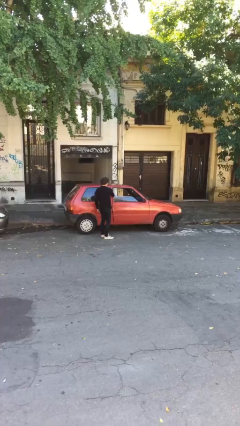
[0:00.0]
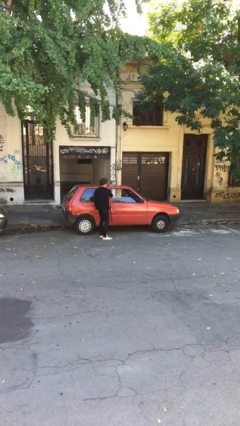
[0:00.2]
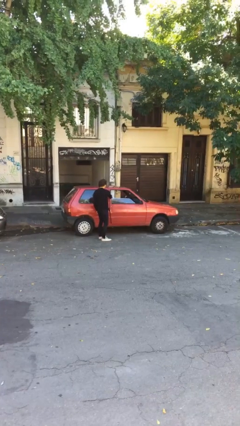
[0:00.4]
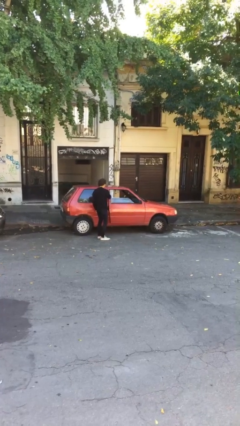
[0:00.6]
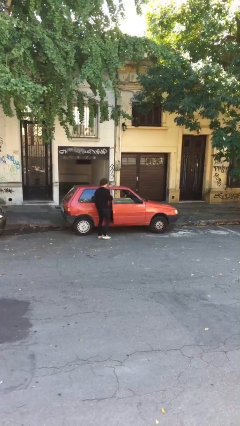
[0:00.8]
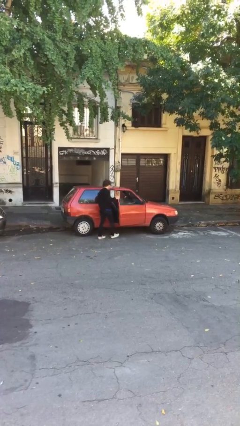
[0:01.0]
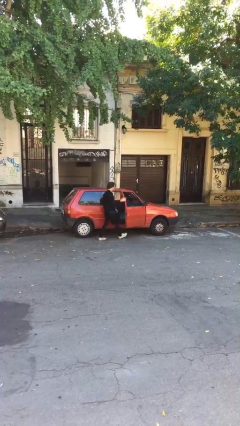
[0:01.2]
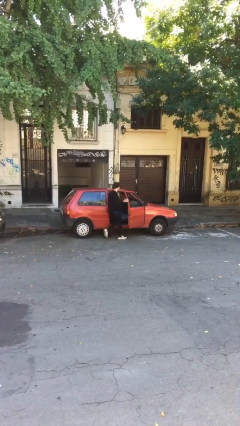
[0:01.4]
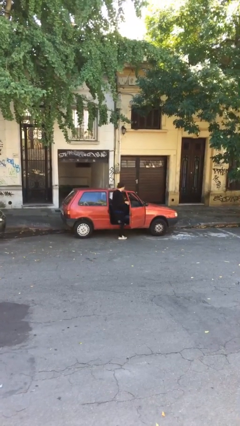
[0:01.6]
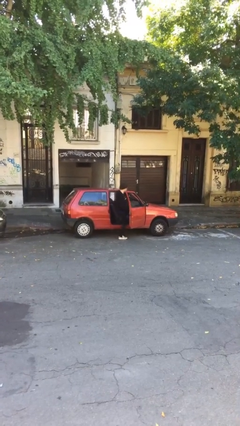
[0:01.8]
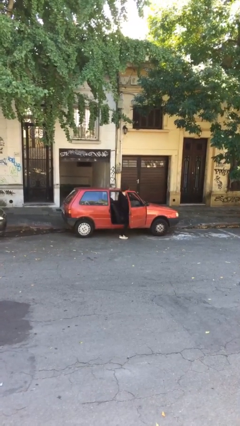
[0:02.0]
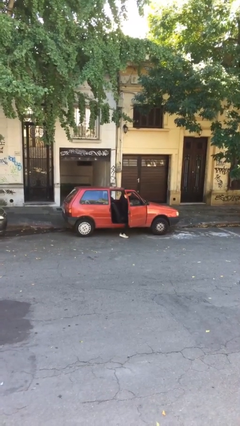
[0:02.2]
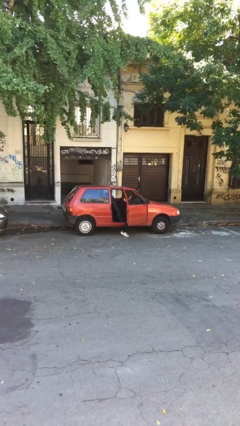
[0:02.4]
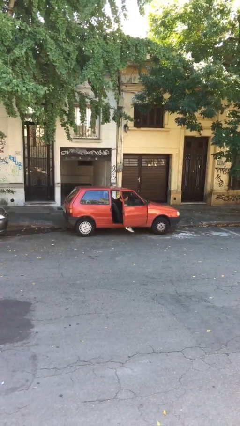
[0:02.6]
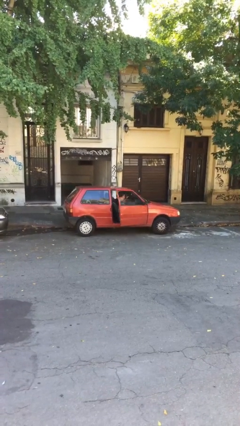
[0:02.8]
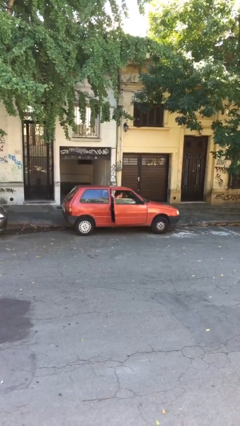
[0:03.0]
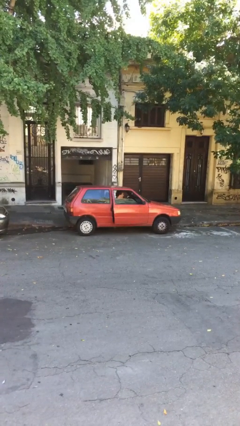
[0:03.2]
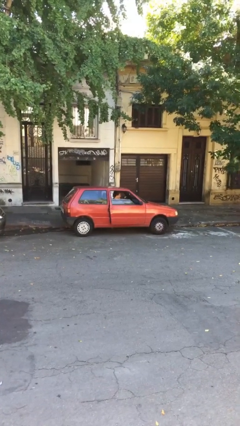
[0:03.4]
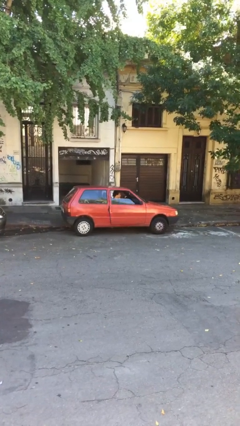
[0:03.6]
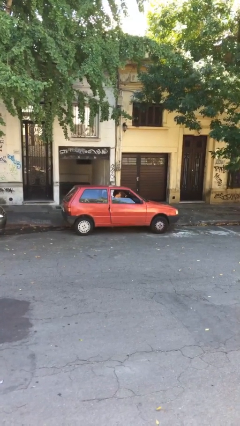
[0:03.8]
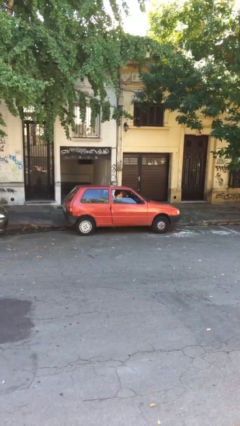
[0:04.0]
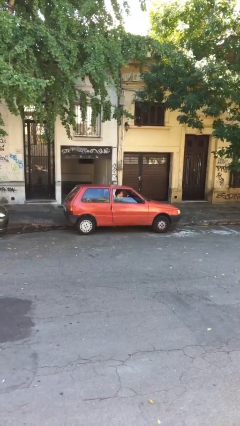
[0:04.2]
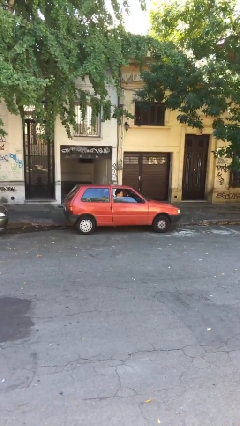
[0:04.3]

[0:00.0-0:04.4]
car picks up person

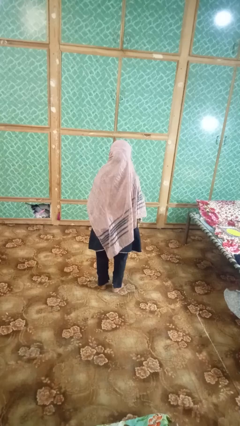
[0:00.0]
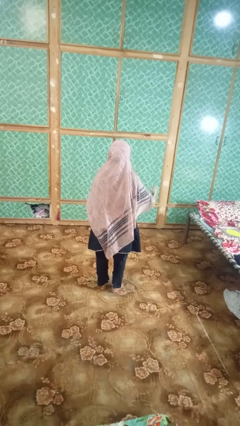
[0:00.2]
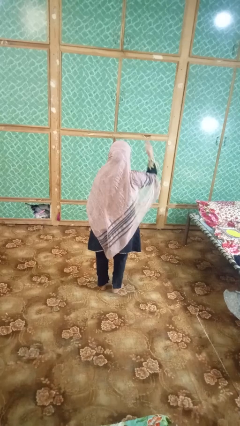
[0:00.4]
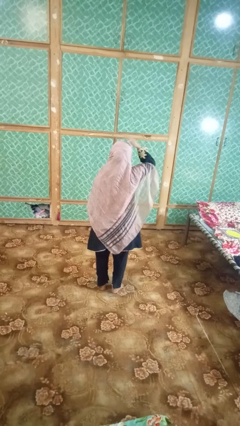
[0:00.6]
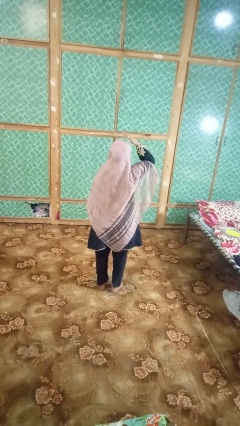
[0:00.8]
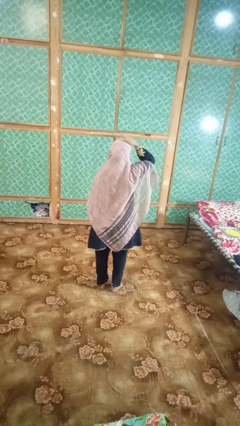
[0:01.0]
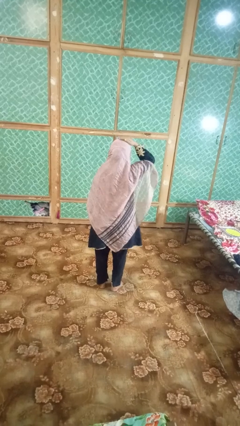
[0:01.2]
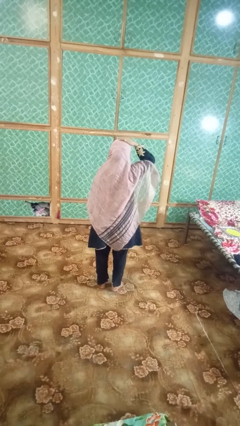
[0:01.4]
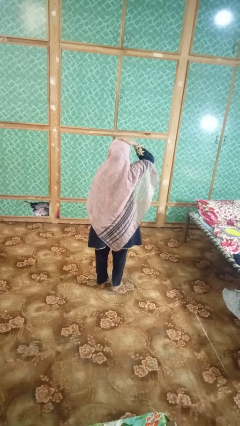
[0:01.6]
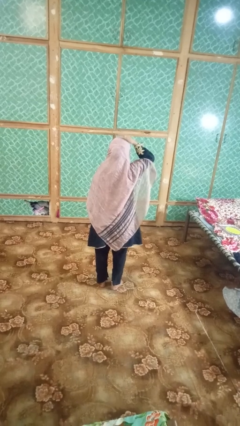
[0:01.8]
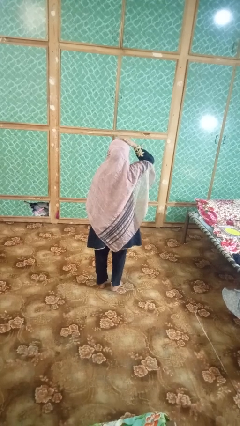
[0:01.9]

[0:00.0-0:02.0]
person pats head

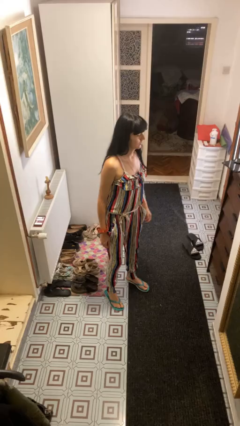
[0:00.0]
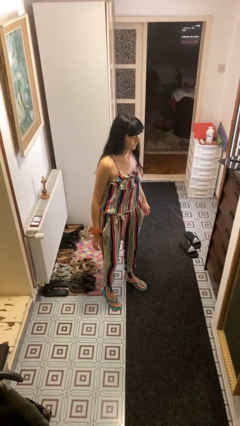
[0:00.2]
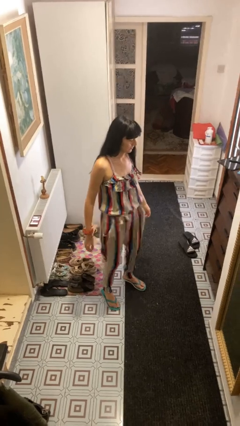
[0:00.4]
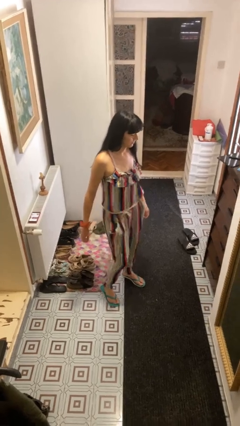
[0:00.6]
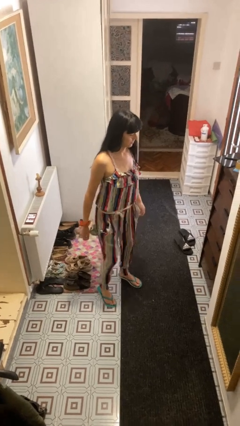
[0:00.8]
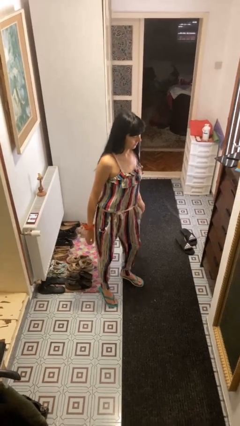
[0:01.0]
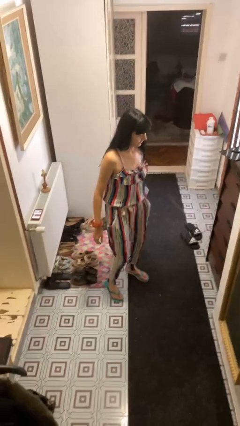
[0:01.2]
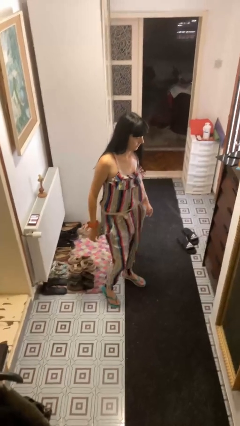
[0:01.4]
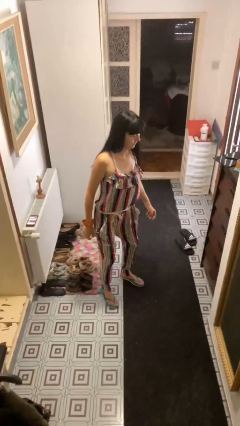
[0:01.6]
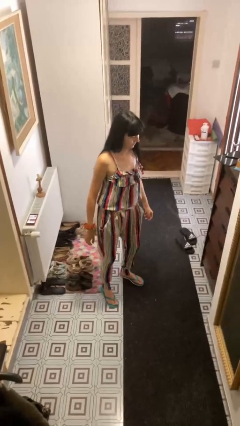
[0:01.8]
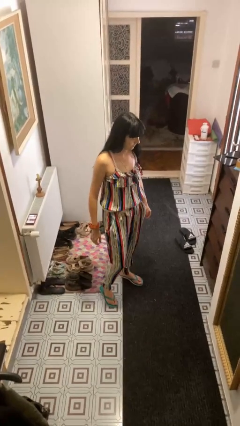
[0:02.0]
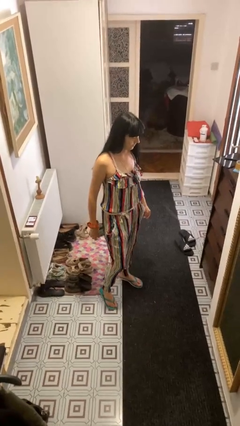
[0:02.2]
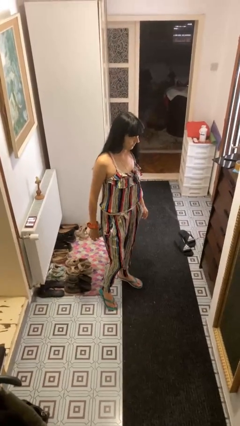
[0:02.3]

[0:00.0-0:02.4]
person wiggles hips

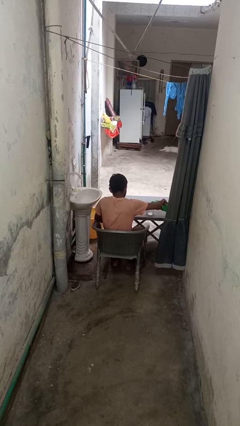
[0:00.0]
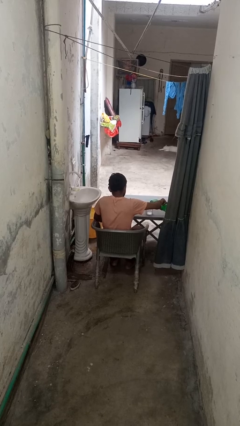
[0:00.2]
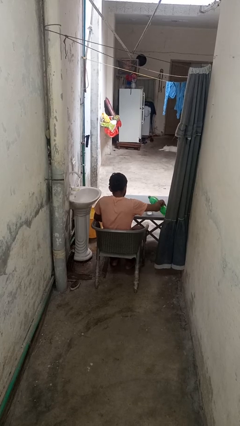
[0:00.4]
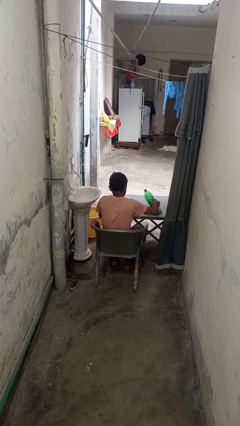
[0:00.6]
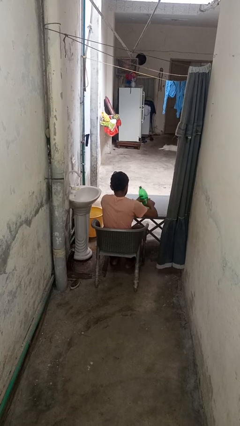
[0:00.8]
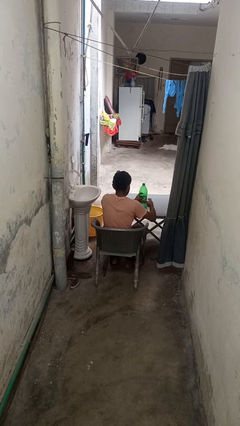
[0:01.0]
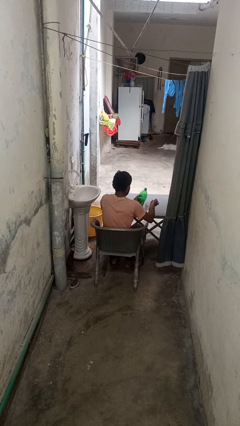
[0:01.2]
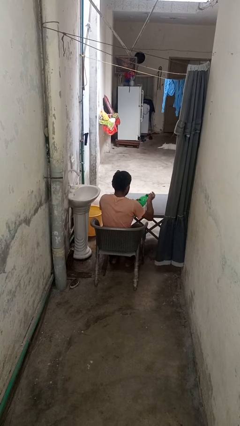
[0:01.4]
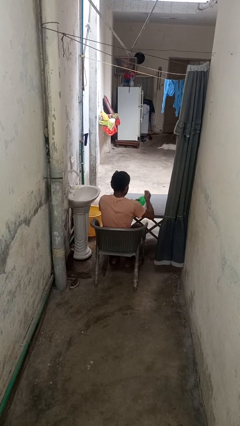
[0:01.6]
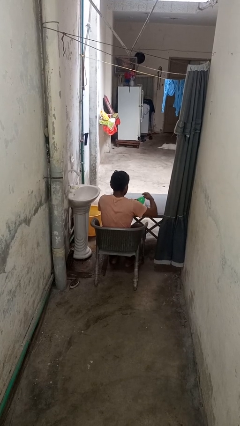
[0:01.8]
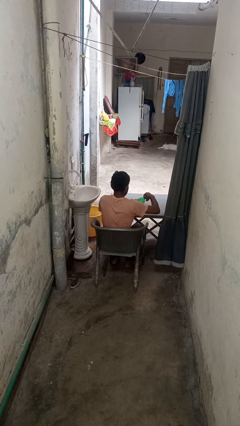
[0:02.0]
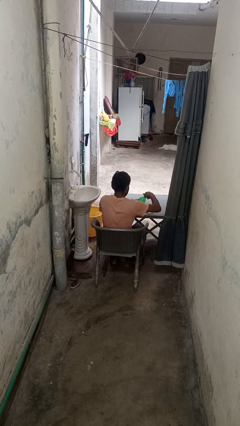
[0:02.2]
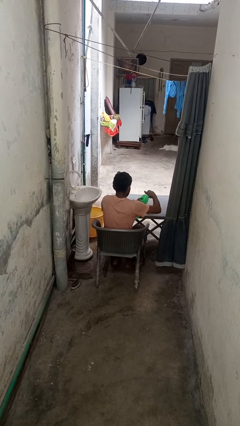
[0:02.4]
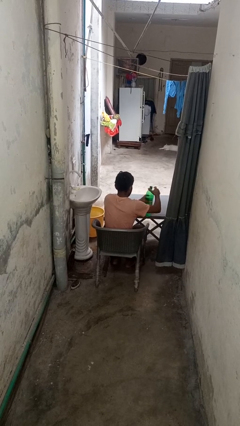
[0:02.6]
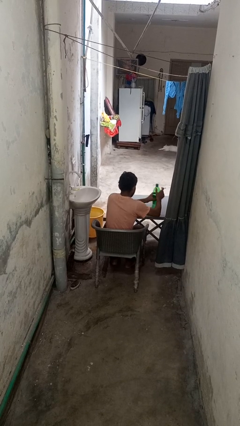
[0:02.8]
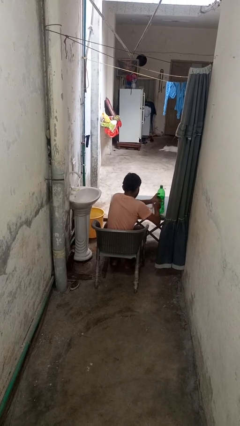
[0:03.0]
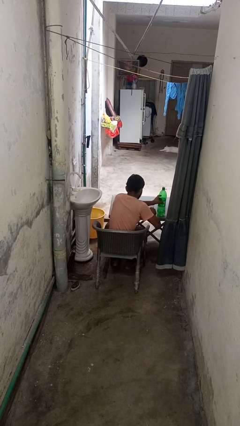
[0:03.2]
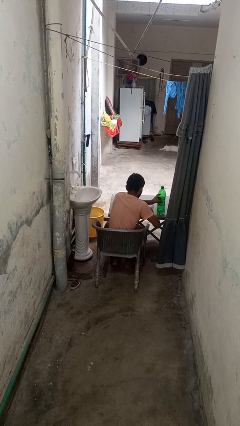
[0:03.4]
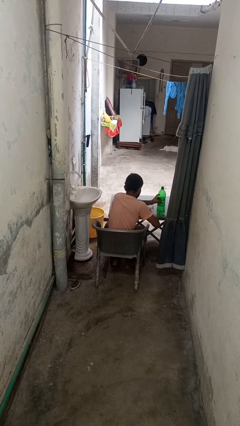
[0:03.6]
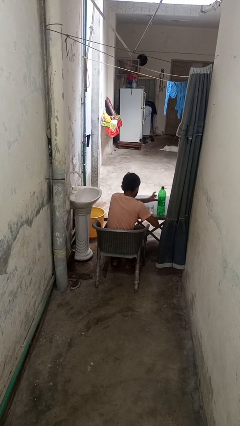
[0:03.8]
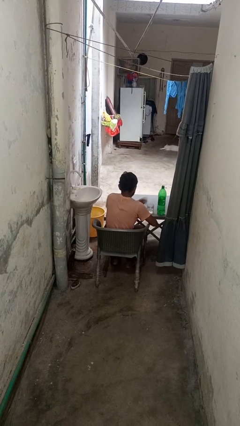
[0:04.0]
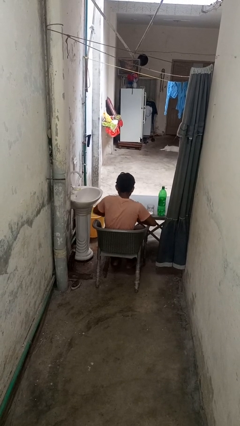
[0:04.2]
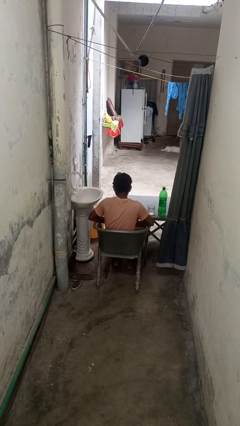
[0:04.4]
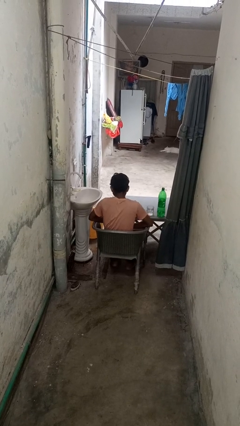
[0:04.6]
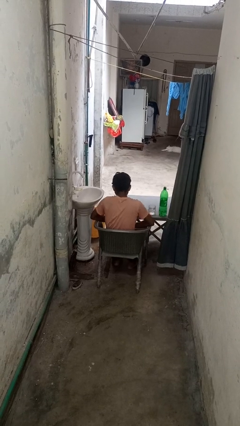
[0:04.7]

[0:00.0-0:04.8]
person screws lid to bottle

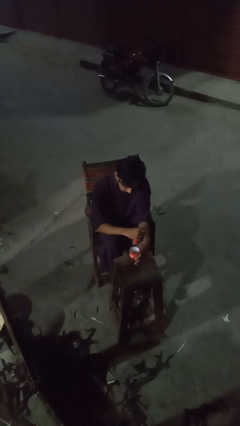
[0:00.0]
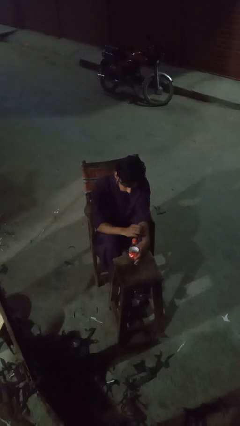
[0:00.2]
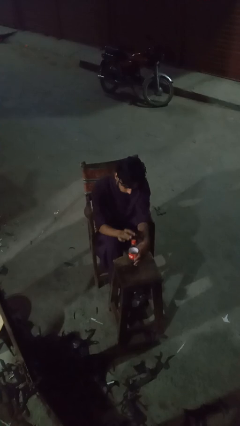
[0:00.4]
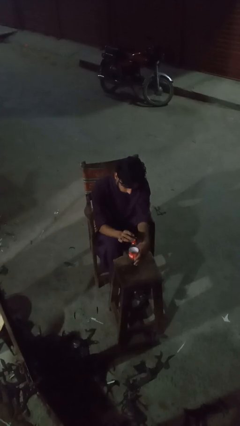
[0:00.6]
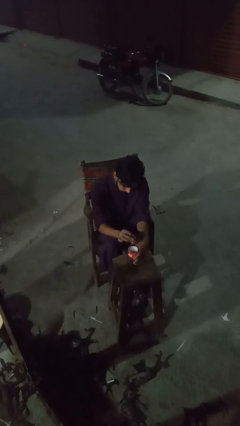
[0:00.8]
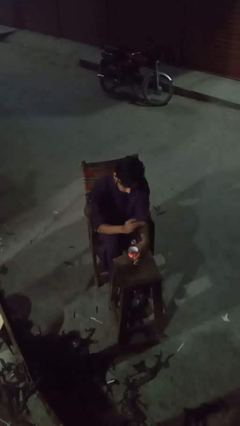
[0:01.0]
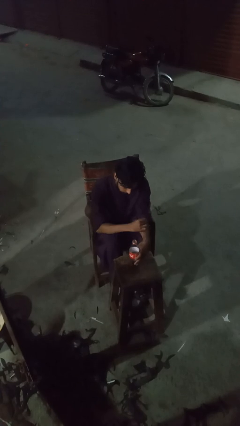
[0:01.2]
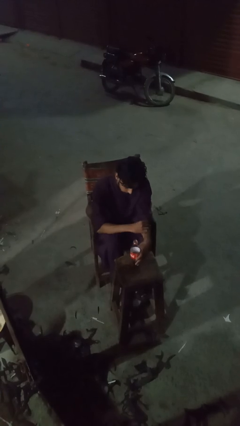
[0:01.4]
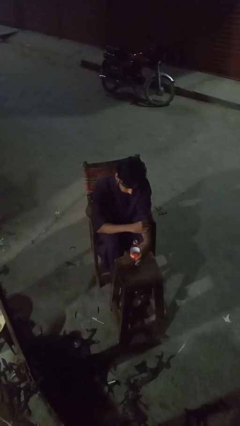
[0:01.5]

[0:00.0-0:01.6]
person unscrews lid from bottle

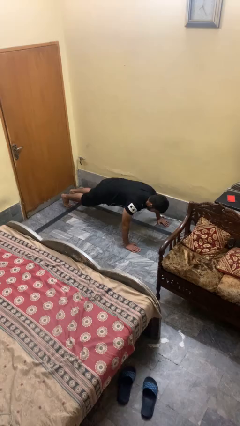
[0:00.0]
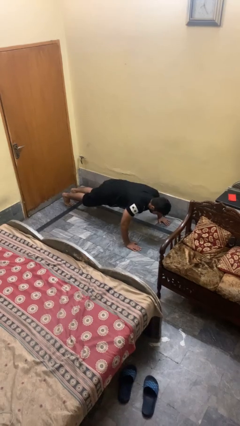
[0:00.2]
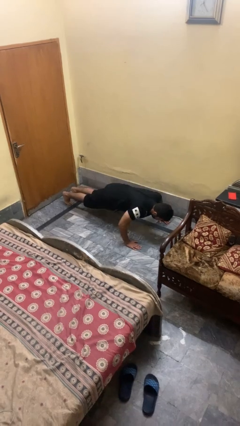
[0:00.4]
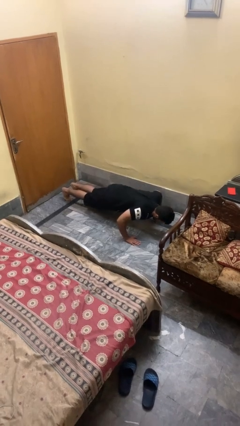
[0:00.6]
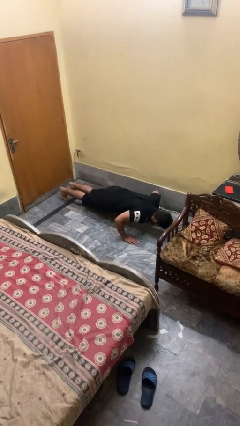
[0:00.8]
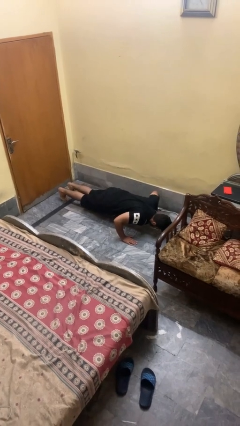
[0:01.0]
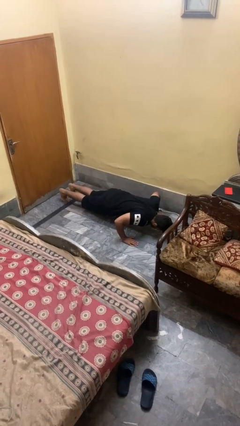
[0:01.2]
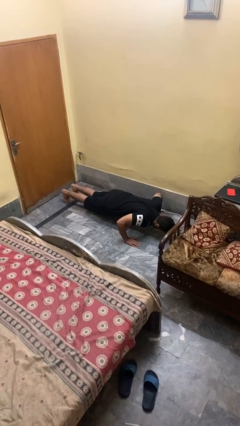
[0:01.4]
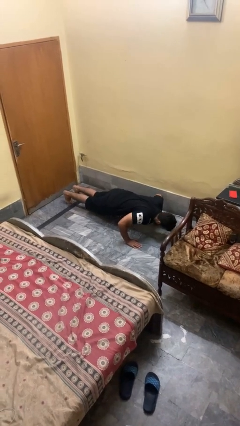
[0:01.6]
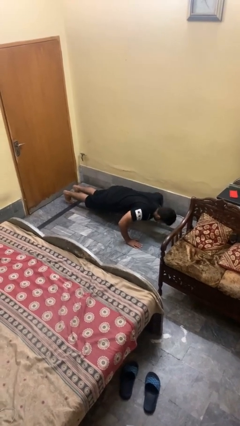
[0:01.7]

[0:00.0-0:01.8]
person exercises with pushup

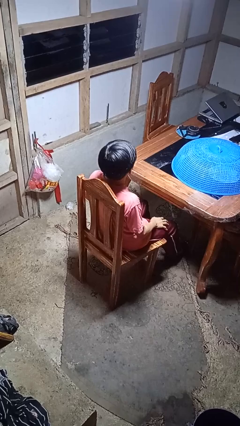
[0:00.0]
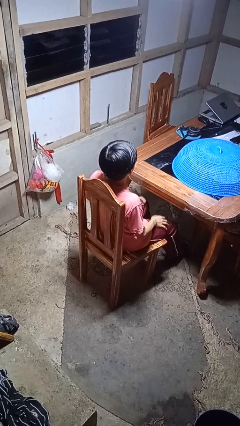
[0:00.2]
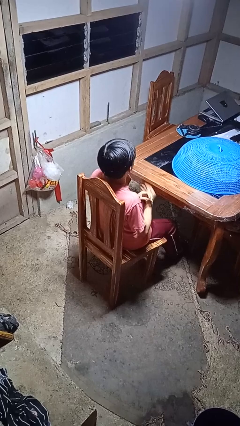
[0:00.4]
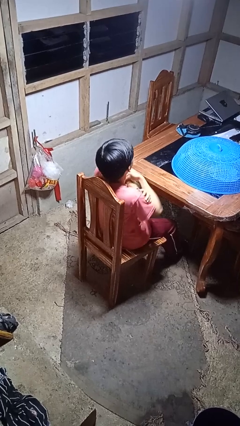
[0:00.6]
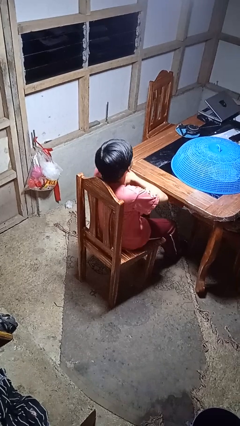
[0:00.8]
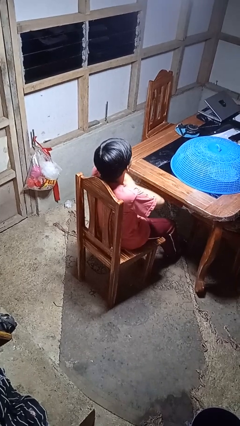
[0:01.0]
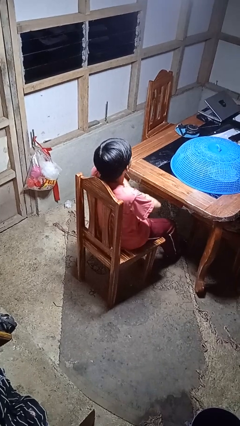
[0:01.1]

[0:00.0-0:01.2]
person crosses arms
